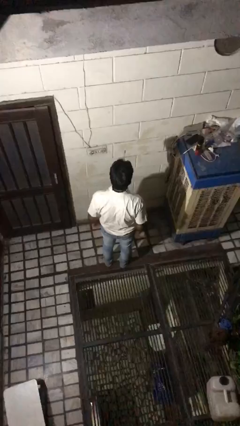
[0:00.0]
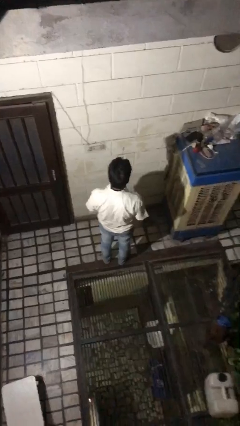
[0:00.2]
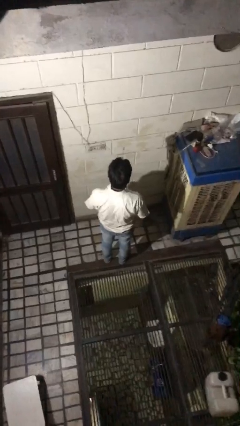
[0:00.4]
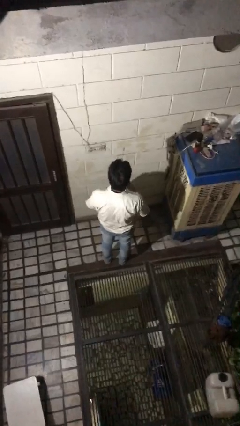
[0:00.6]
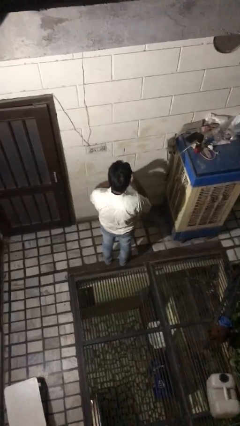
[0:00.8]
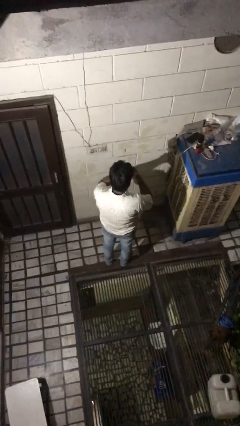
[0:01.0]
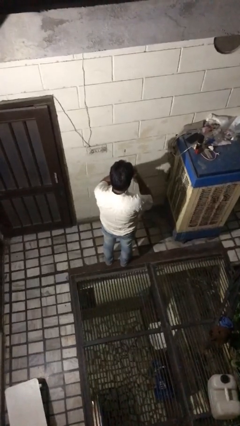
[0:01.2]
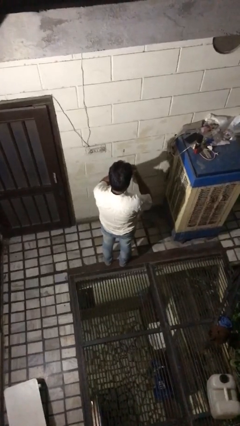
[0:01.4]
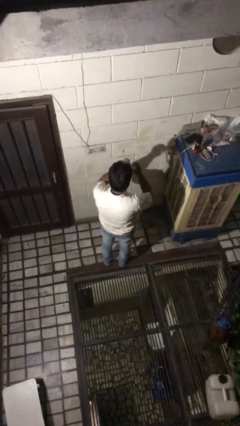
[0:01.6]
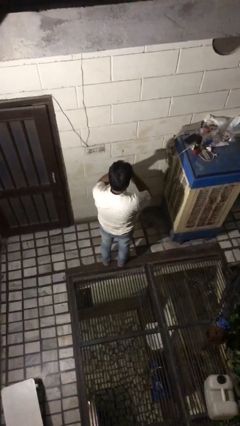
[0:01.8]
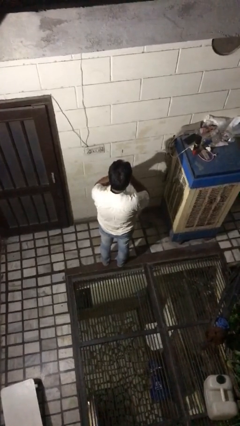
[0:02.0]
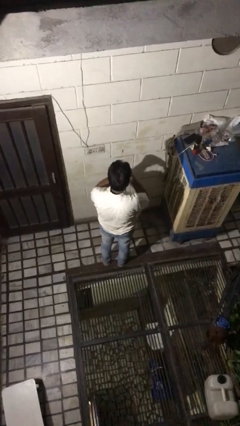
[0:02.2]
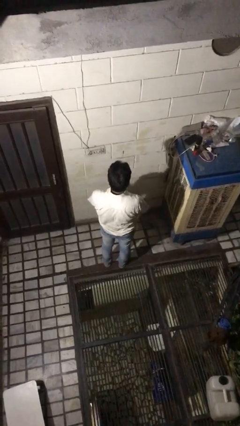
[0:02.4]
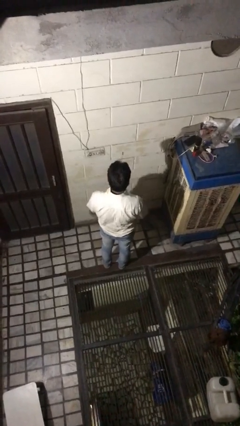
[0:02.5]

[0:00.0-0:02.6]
person snaps fingers

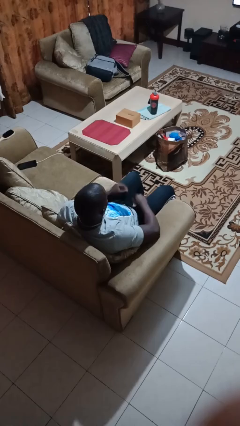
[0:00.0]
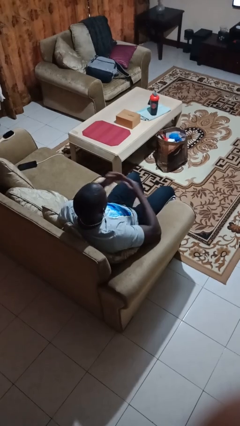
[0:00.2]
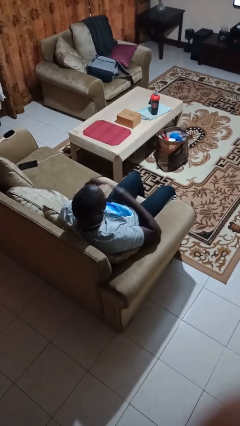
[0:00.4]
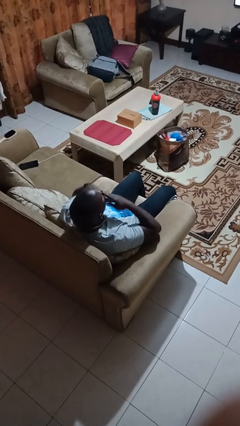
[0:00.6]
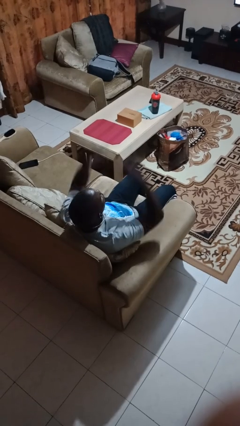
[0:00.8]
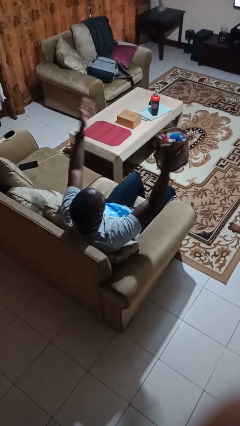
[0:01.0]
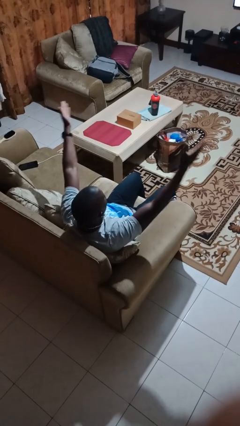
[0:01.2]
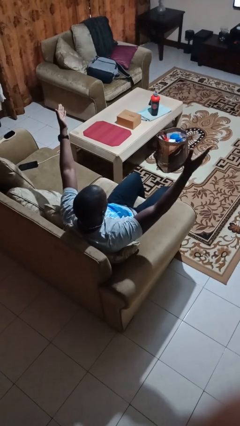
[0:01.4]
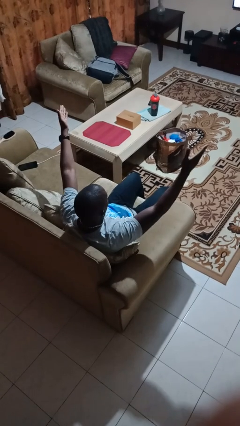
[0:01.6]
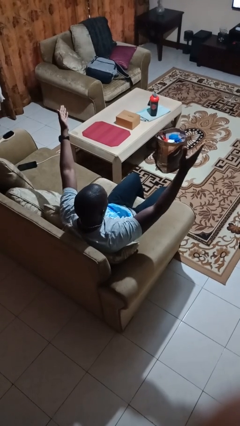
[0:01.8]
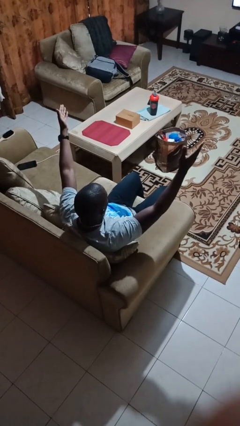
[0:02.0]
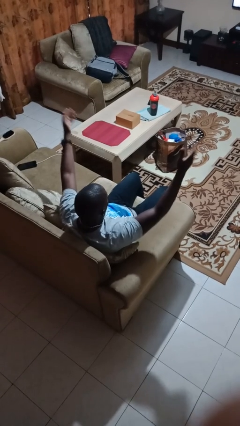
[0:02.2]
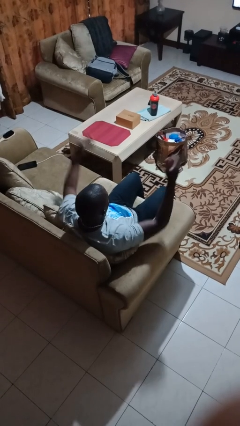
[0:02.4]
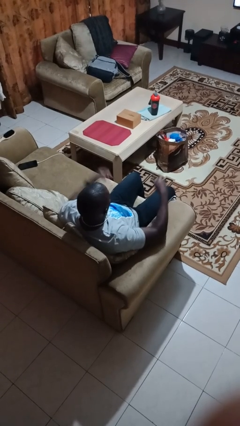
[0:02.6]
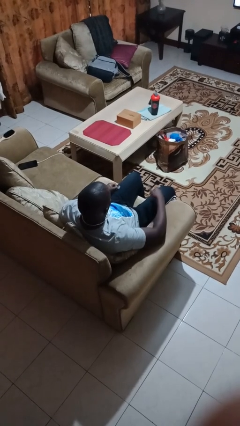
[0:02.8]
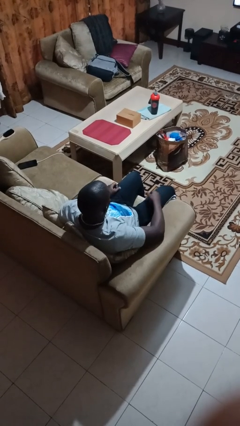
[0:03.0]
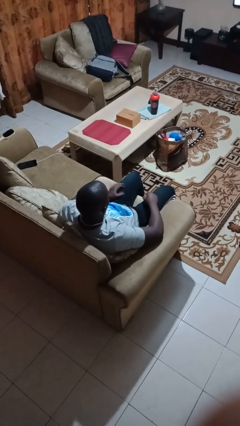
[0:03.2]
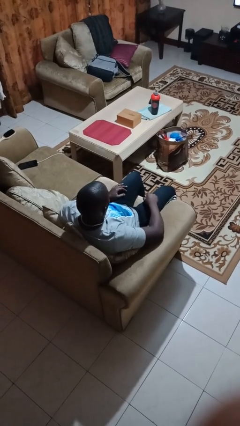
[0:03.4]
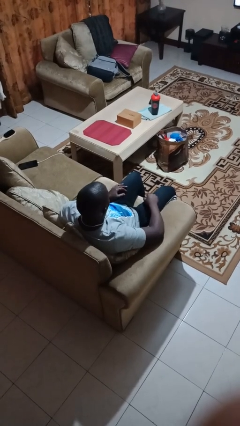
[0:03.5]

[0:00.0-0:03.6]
person gestures blow kiss

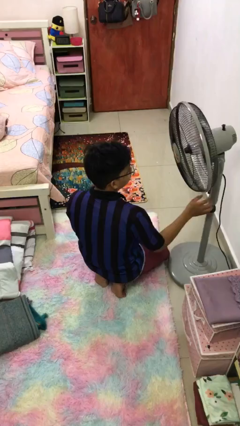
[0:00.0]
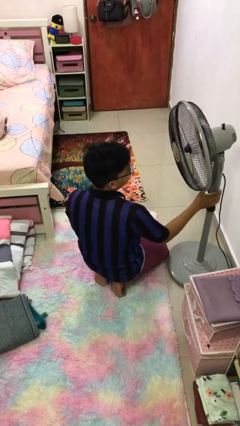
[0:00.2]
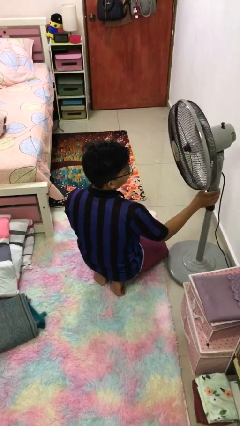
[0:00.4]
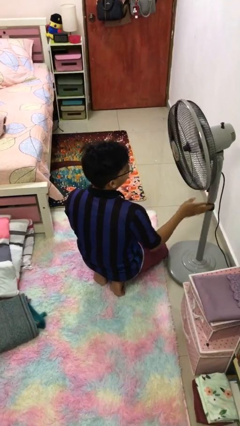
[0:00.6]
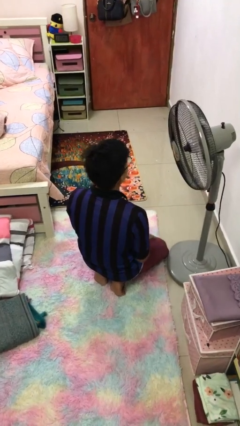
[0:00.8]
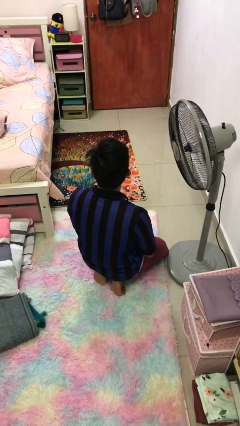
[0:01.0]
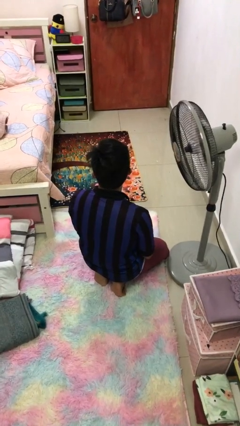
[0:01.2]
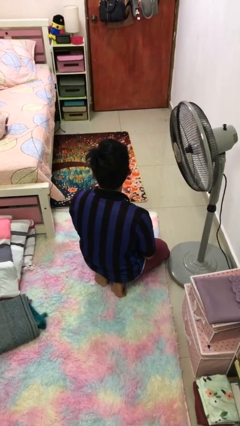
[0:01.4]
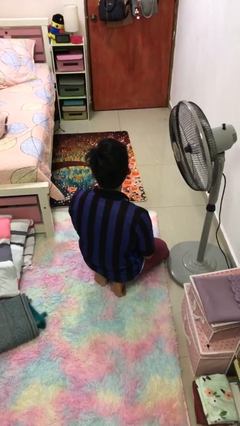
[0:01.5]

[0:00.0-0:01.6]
person turns on fan

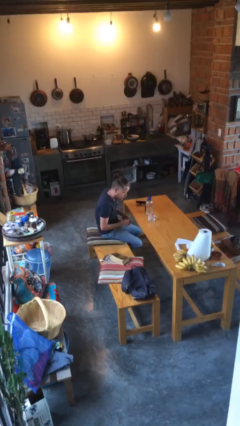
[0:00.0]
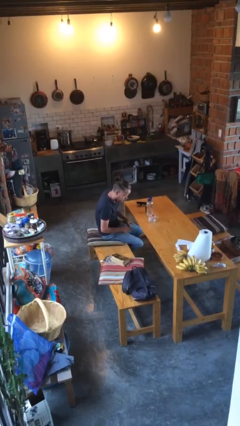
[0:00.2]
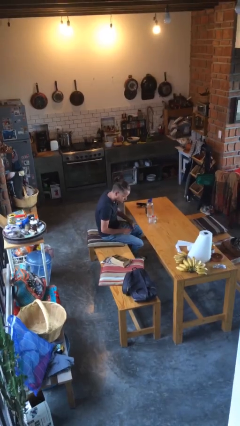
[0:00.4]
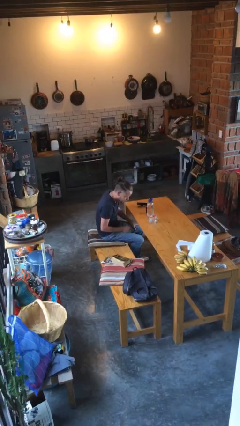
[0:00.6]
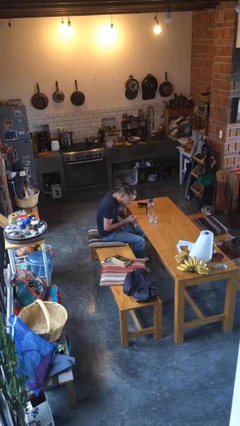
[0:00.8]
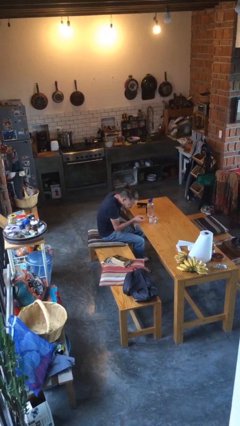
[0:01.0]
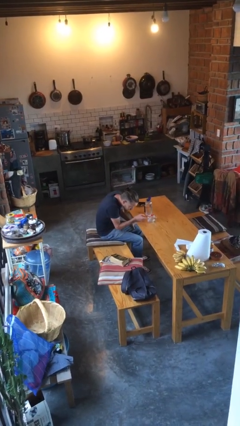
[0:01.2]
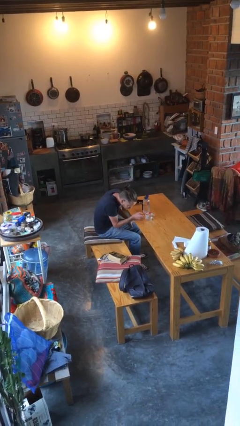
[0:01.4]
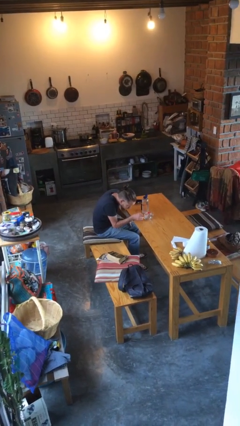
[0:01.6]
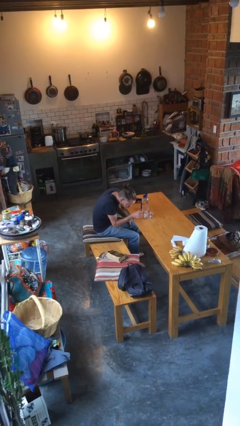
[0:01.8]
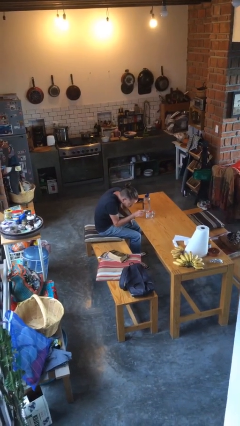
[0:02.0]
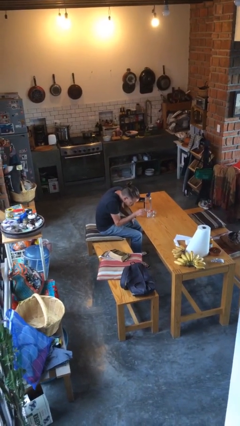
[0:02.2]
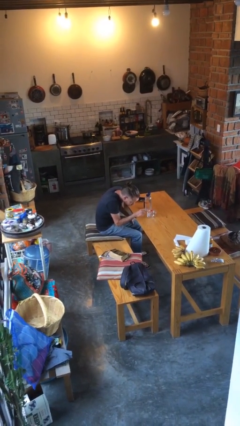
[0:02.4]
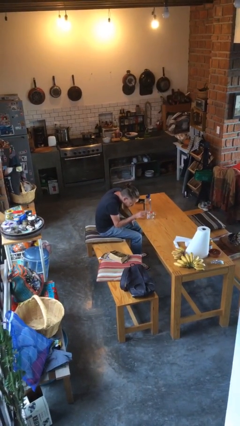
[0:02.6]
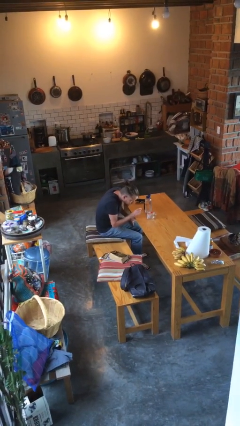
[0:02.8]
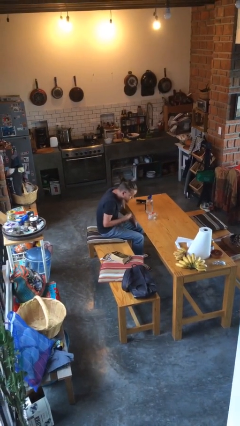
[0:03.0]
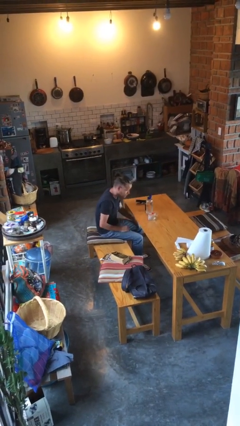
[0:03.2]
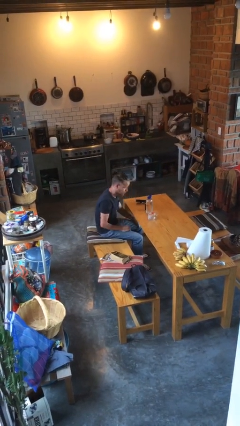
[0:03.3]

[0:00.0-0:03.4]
person taps object with finger

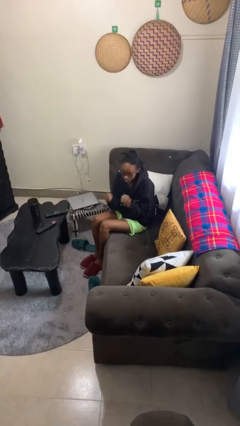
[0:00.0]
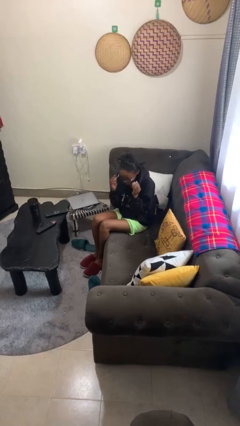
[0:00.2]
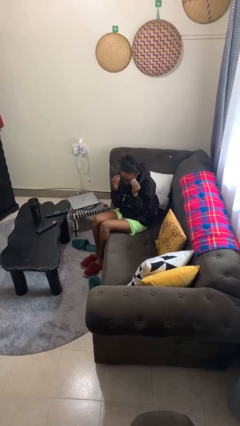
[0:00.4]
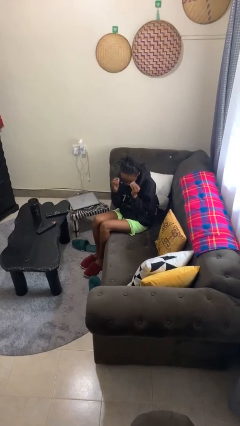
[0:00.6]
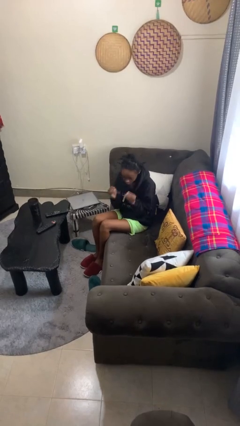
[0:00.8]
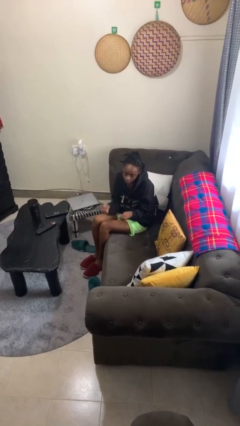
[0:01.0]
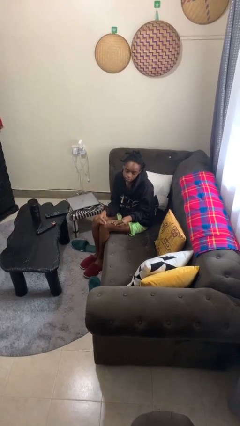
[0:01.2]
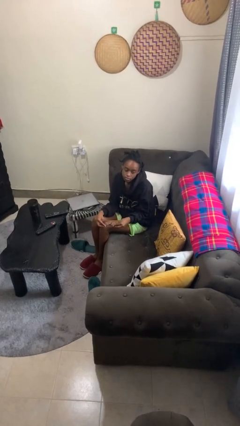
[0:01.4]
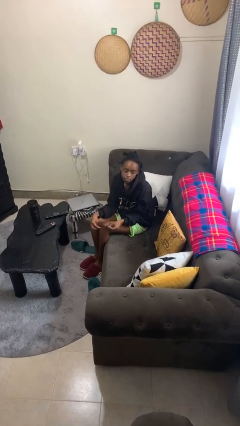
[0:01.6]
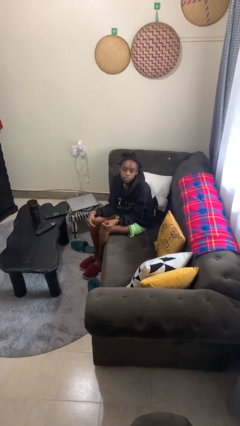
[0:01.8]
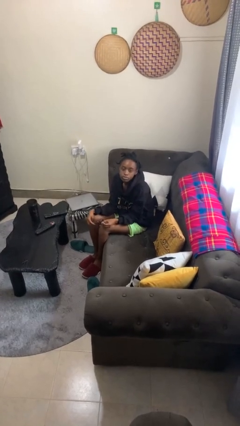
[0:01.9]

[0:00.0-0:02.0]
person takes off glasses

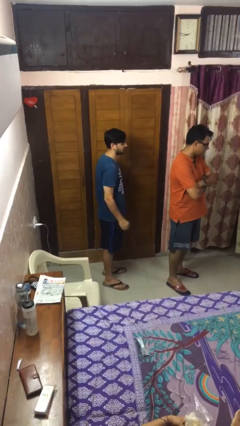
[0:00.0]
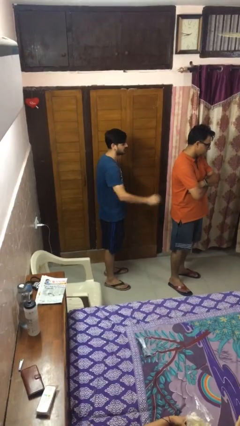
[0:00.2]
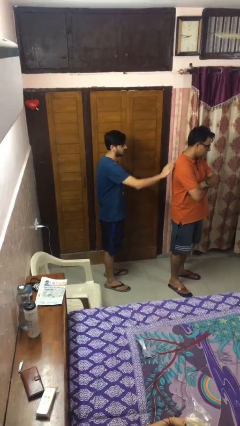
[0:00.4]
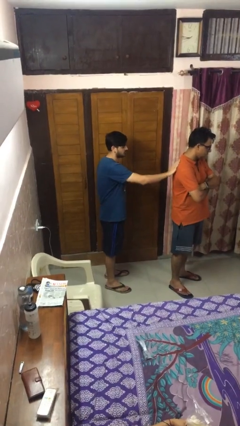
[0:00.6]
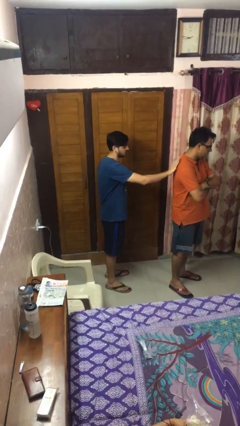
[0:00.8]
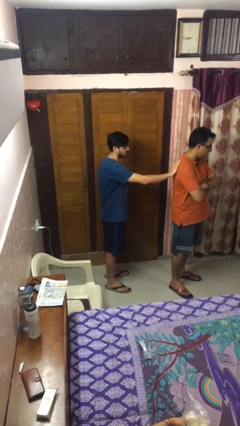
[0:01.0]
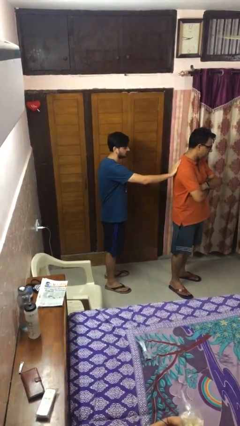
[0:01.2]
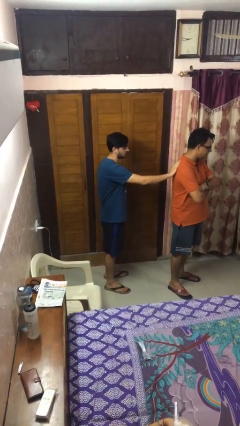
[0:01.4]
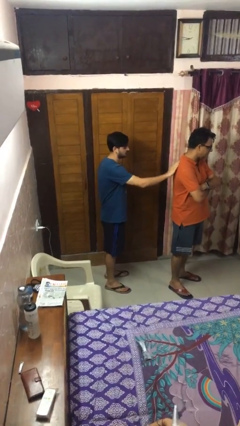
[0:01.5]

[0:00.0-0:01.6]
person touches back of person

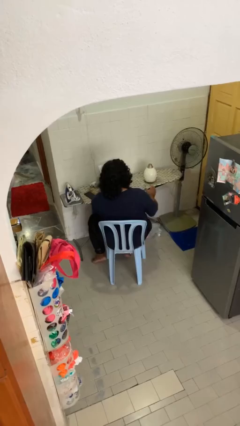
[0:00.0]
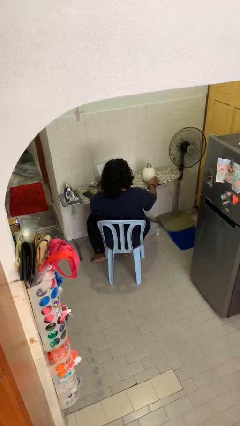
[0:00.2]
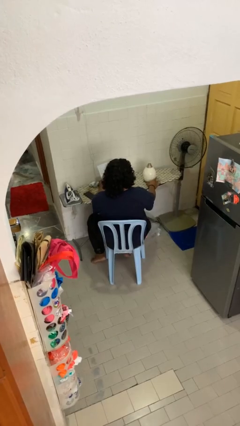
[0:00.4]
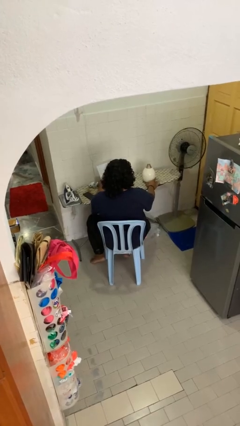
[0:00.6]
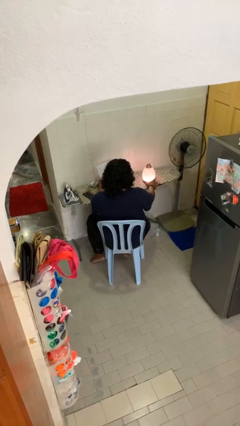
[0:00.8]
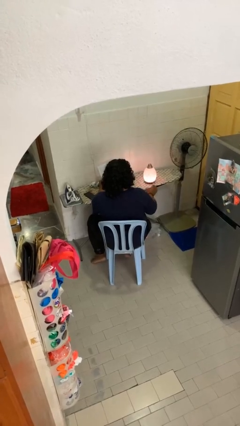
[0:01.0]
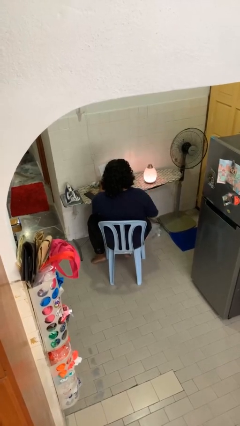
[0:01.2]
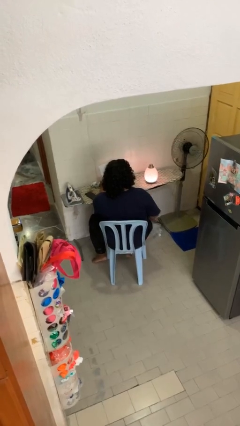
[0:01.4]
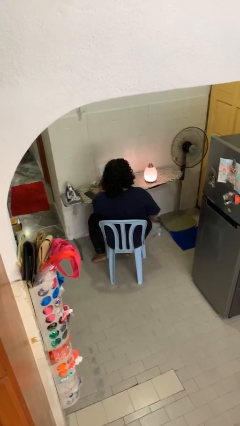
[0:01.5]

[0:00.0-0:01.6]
person turns on lamp

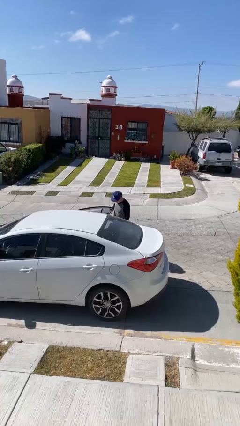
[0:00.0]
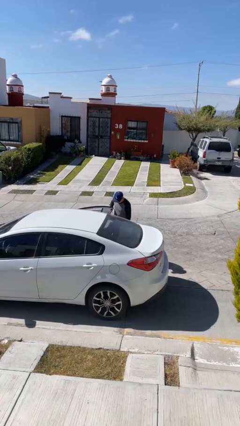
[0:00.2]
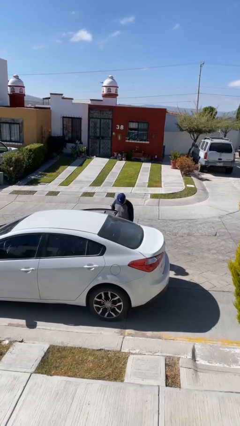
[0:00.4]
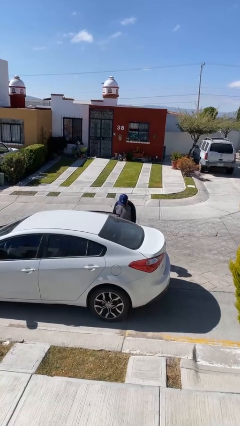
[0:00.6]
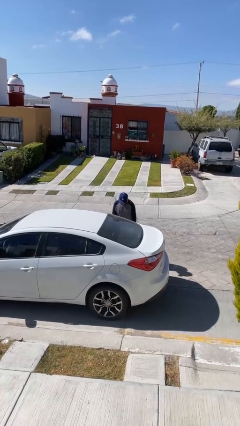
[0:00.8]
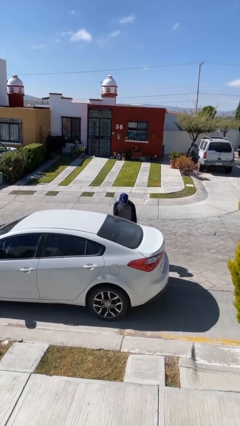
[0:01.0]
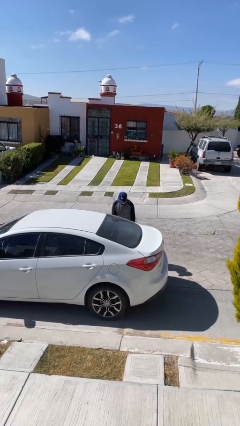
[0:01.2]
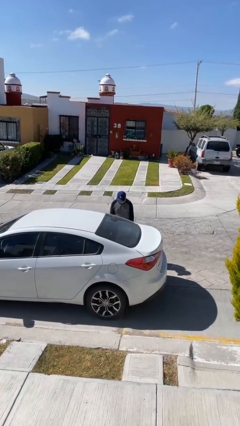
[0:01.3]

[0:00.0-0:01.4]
person closes car door
